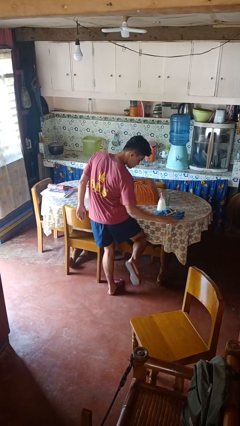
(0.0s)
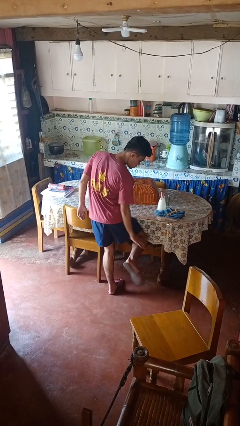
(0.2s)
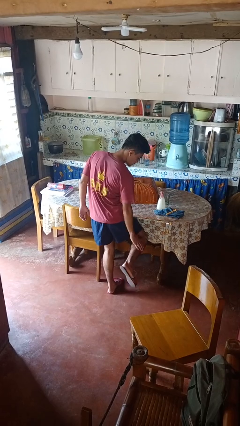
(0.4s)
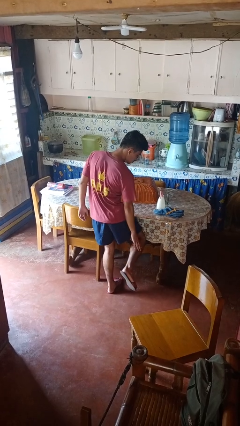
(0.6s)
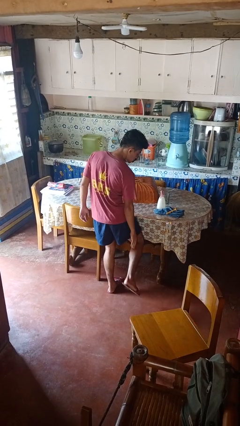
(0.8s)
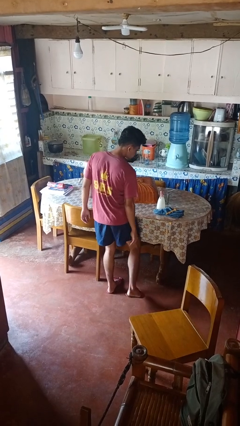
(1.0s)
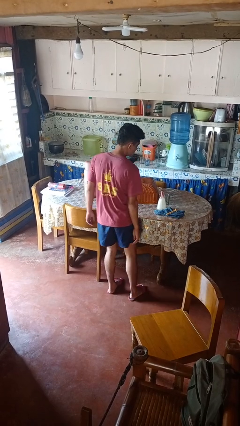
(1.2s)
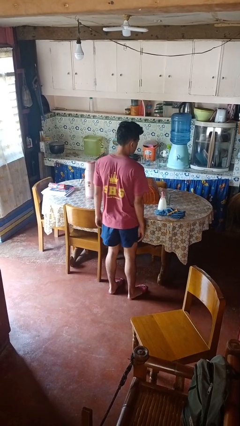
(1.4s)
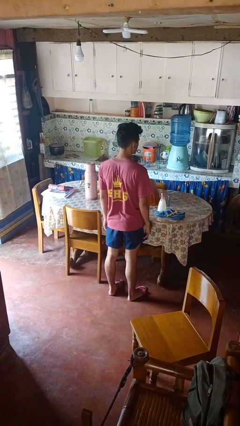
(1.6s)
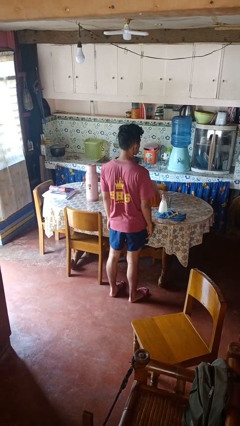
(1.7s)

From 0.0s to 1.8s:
person swats bug

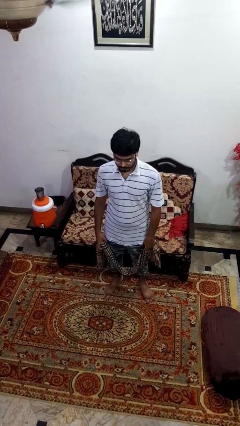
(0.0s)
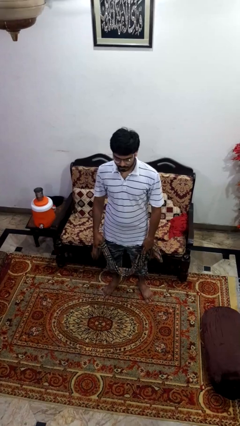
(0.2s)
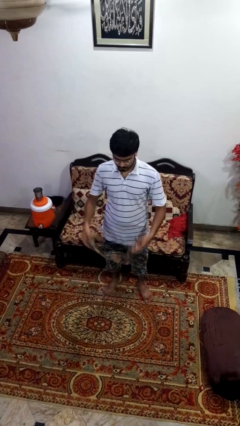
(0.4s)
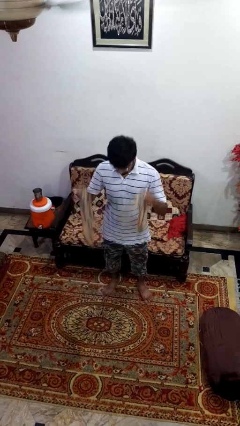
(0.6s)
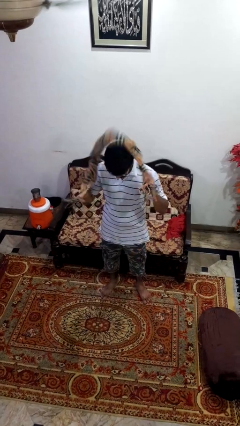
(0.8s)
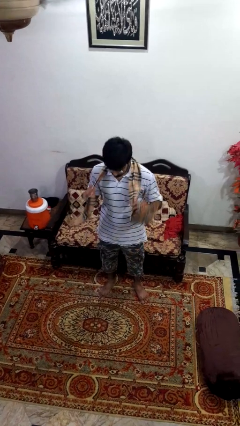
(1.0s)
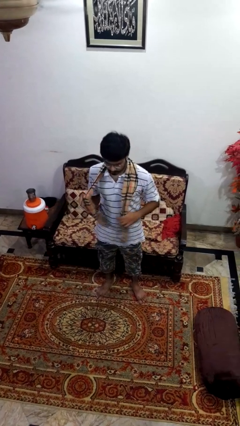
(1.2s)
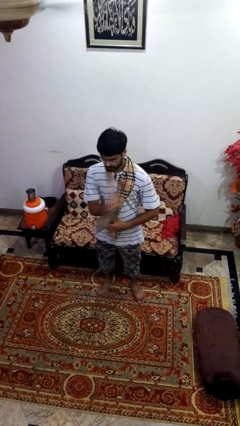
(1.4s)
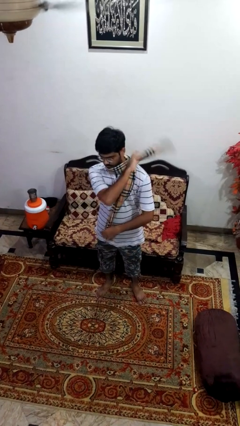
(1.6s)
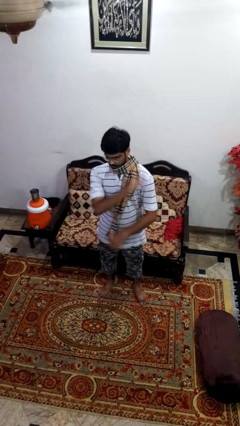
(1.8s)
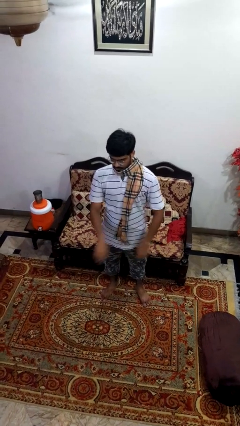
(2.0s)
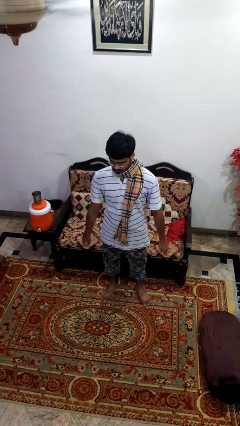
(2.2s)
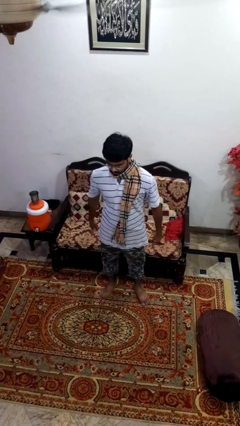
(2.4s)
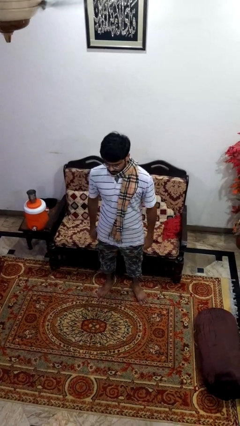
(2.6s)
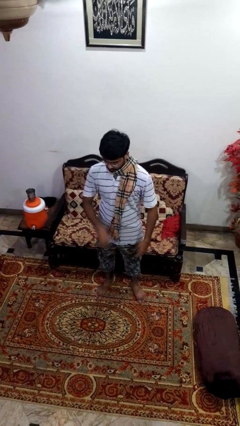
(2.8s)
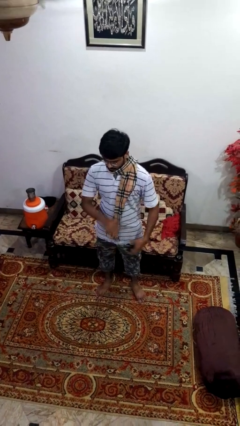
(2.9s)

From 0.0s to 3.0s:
person puts on scarf

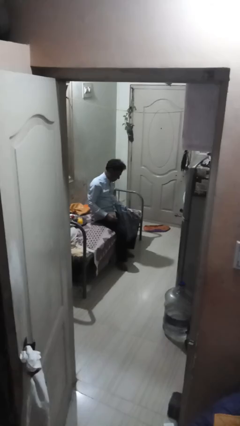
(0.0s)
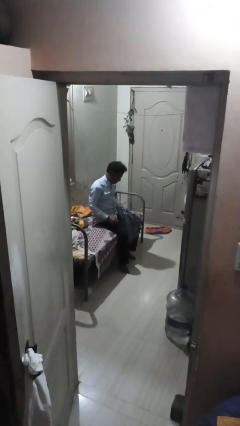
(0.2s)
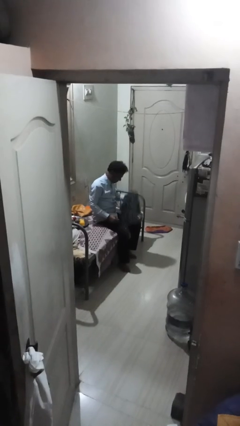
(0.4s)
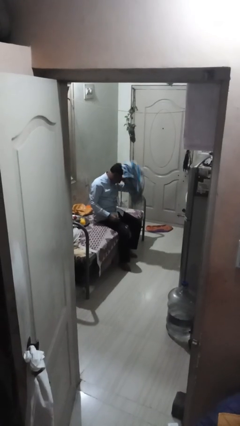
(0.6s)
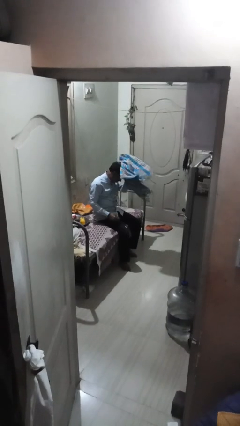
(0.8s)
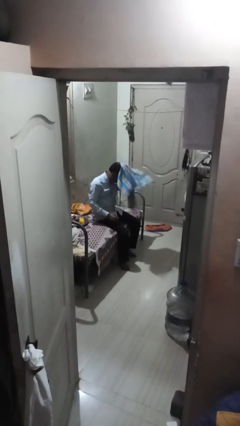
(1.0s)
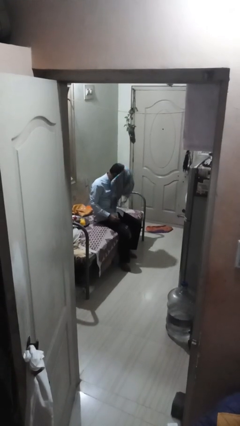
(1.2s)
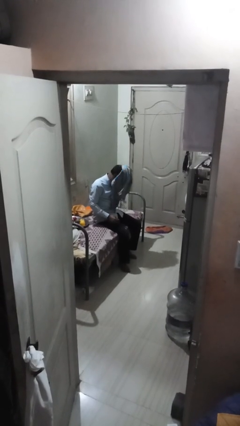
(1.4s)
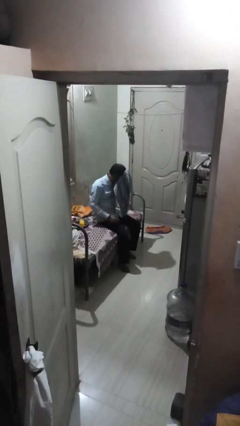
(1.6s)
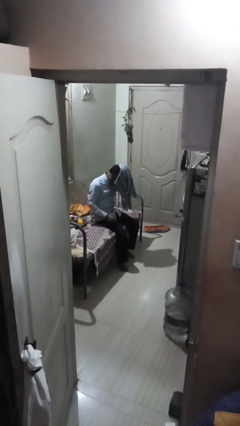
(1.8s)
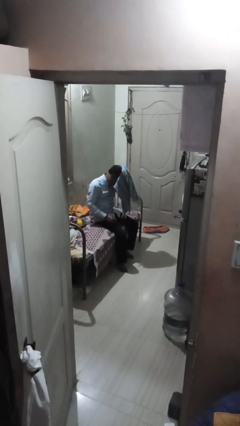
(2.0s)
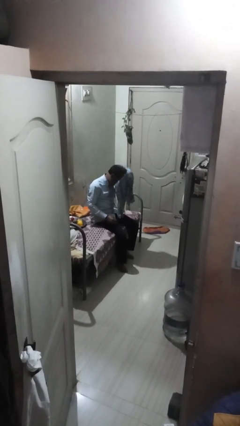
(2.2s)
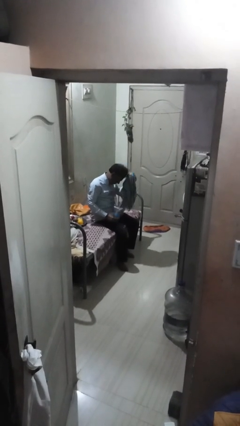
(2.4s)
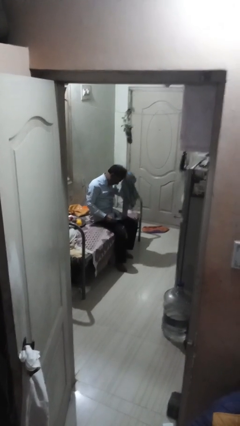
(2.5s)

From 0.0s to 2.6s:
person dries hair with towel

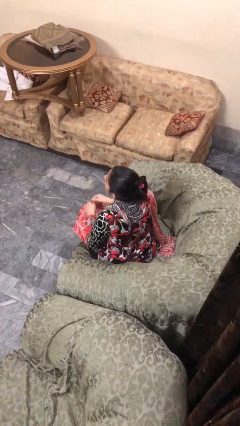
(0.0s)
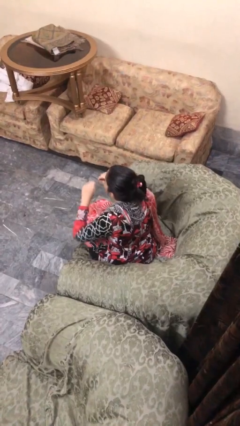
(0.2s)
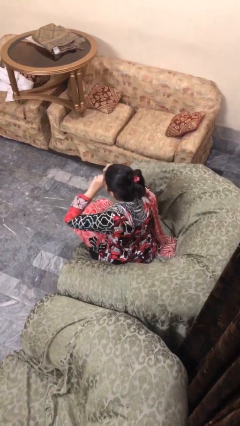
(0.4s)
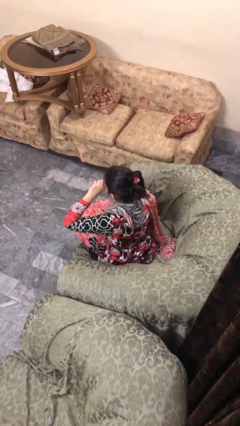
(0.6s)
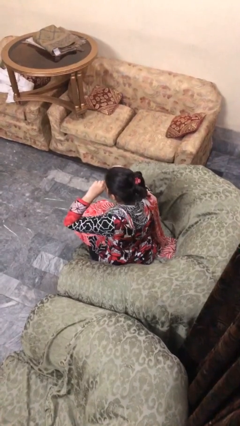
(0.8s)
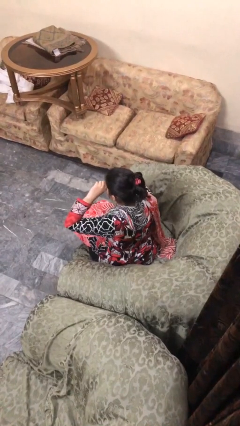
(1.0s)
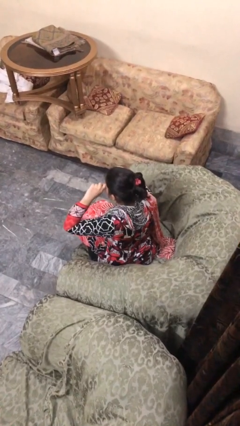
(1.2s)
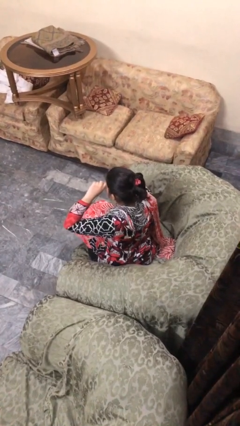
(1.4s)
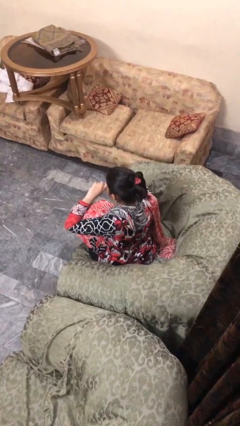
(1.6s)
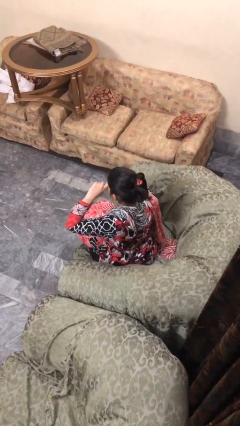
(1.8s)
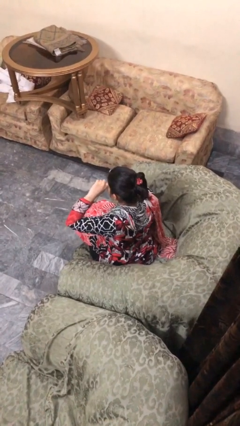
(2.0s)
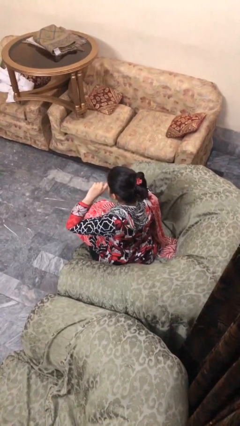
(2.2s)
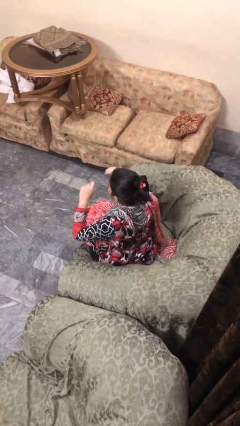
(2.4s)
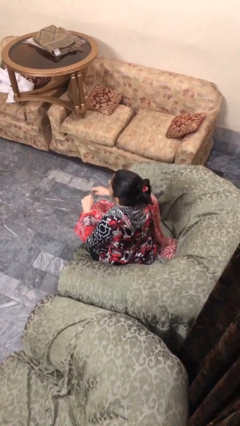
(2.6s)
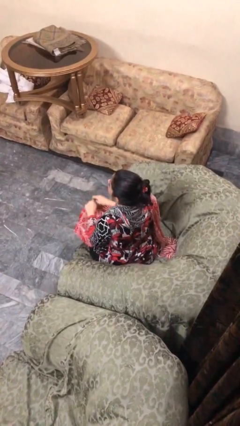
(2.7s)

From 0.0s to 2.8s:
person rubs eyes

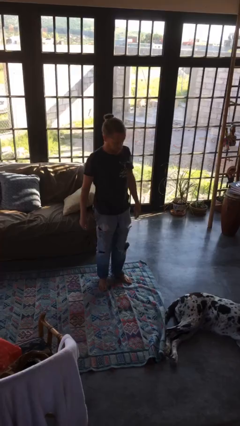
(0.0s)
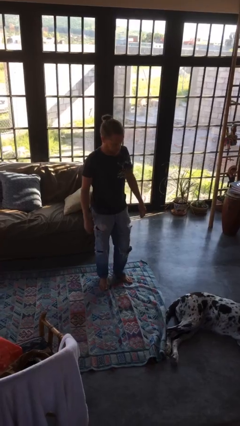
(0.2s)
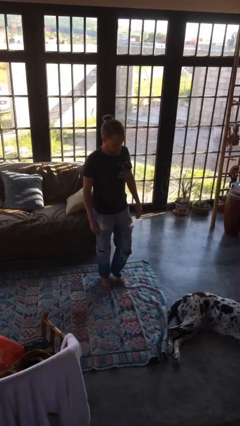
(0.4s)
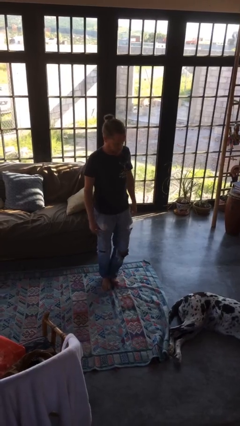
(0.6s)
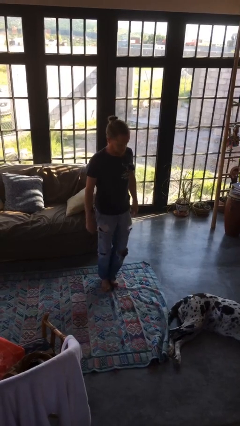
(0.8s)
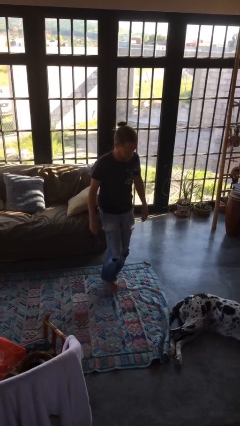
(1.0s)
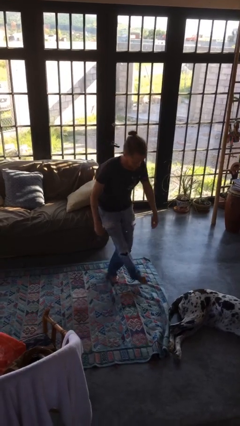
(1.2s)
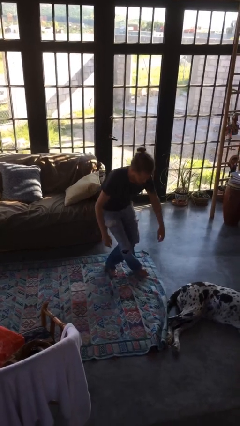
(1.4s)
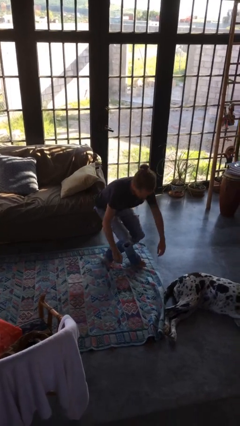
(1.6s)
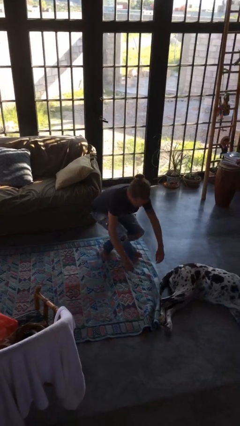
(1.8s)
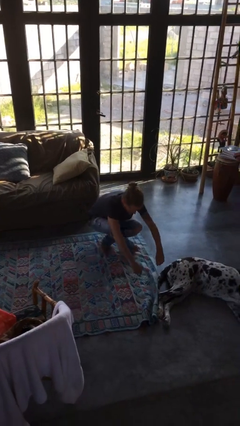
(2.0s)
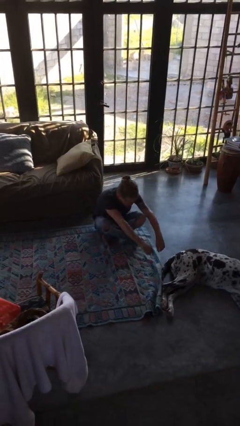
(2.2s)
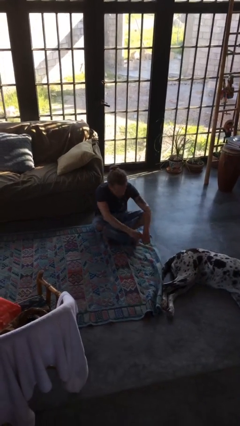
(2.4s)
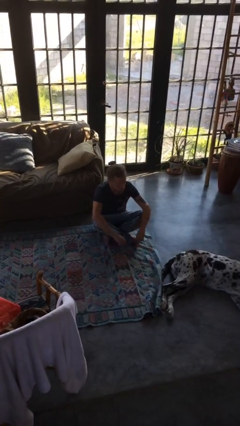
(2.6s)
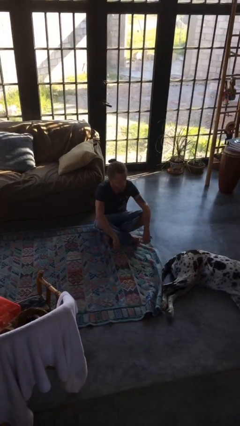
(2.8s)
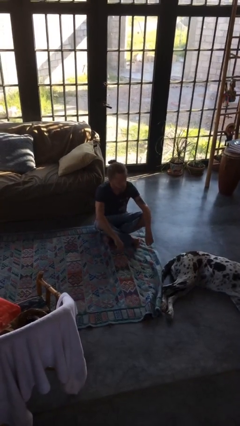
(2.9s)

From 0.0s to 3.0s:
person sits crisscross

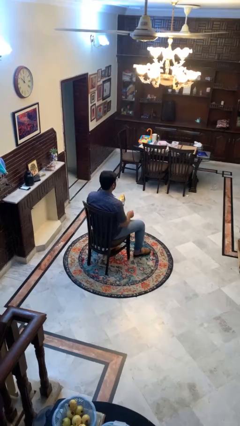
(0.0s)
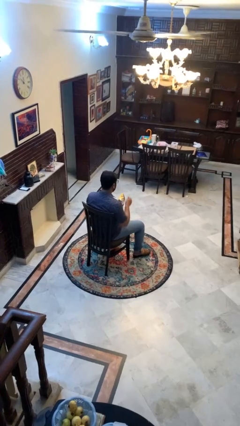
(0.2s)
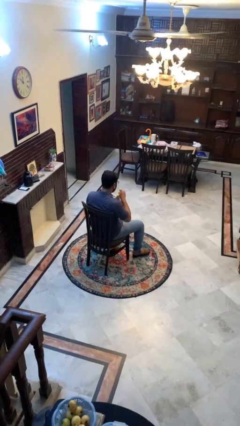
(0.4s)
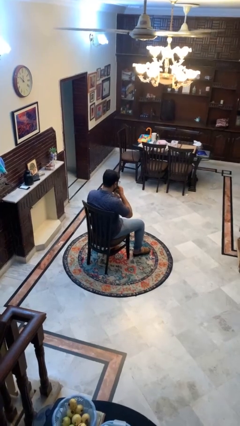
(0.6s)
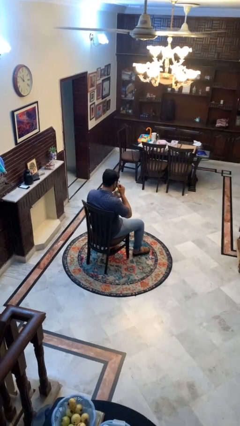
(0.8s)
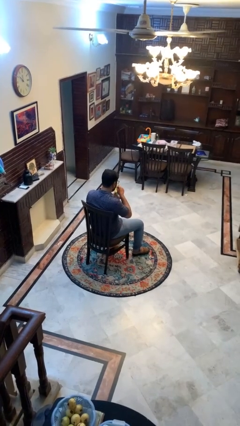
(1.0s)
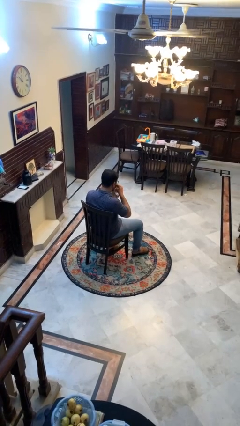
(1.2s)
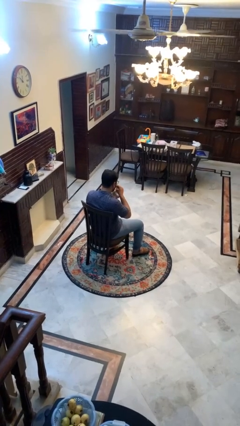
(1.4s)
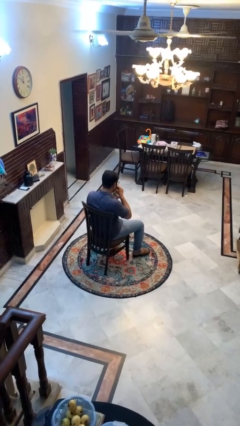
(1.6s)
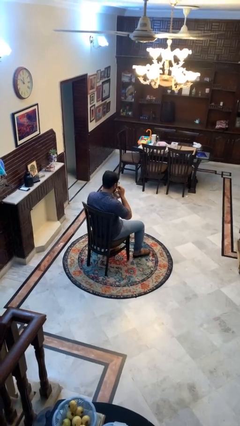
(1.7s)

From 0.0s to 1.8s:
person eats snack from bag

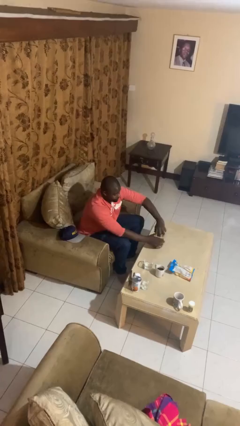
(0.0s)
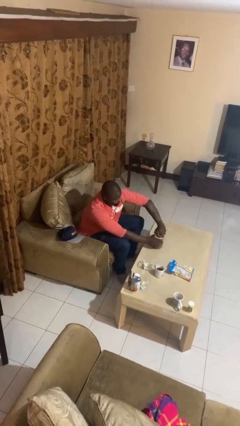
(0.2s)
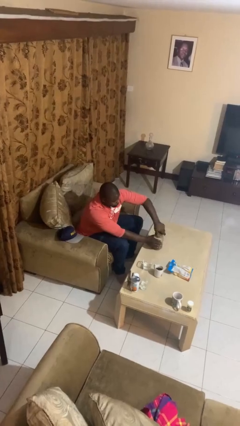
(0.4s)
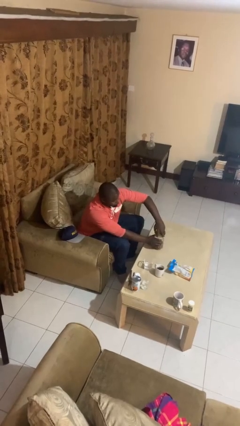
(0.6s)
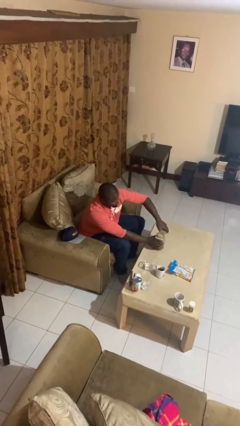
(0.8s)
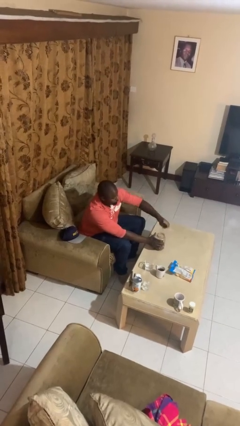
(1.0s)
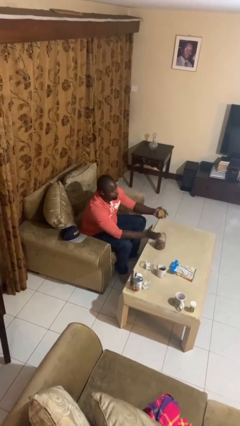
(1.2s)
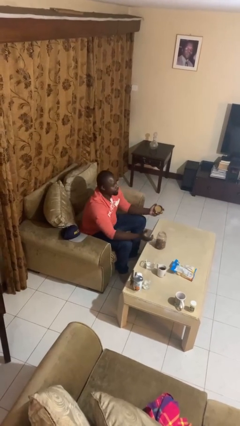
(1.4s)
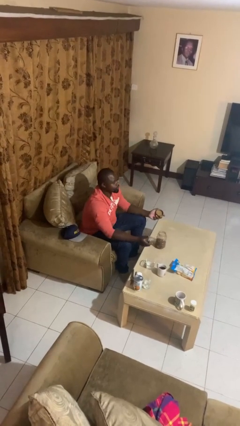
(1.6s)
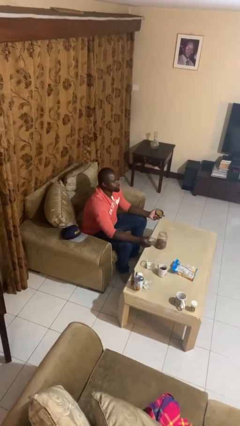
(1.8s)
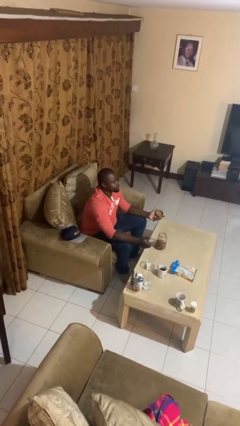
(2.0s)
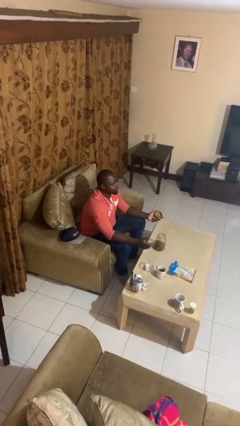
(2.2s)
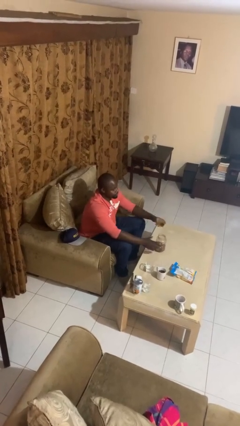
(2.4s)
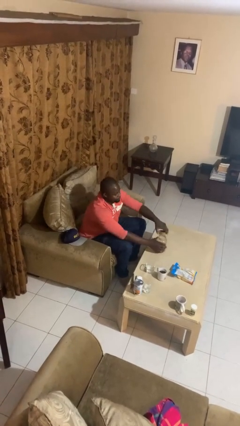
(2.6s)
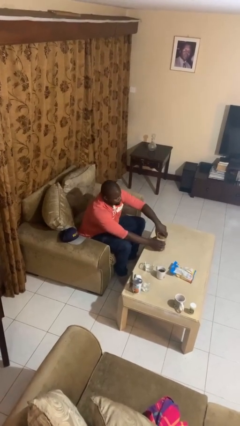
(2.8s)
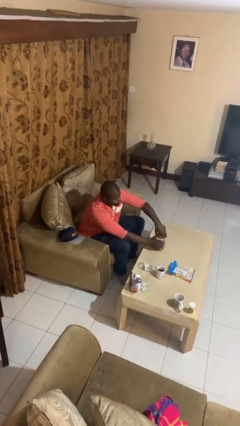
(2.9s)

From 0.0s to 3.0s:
person opens jar
